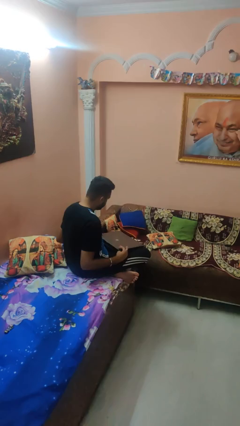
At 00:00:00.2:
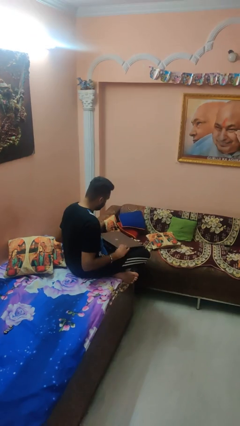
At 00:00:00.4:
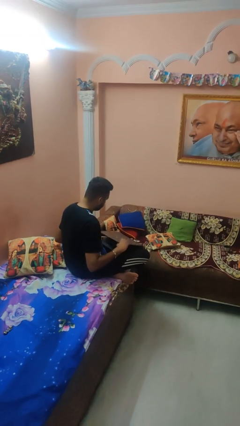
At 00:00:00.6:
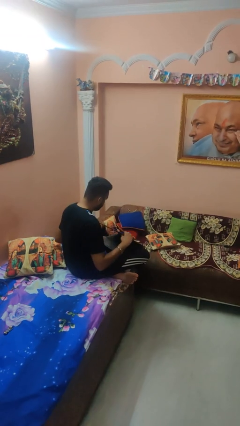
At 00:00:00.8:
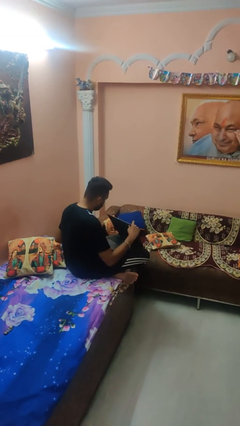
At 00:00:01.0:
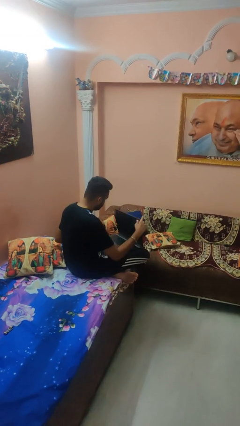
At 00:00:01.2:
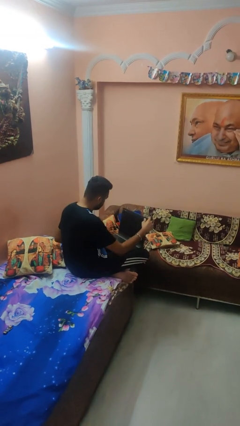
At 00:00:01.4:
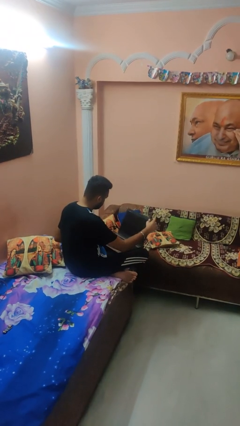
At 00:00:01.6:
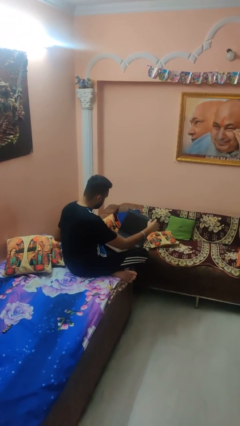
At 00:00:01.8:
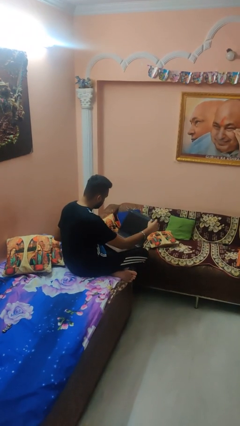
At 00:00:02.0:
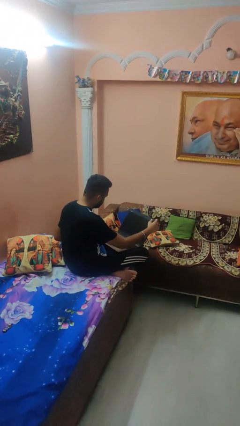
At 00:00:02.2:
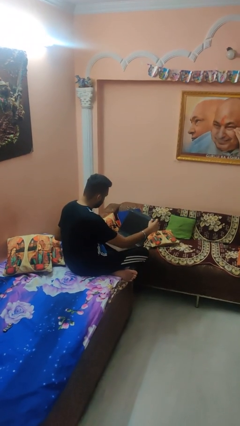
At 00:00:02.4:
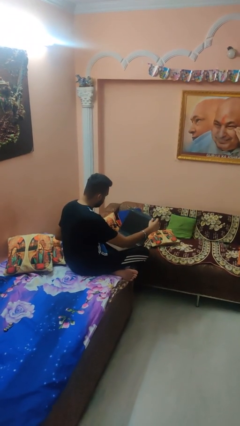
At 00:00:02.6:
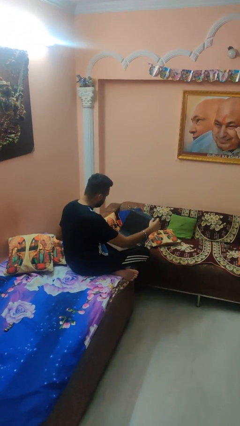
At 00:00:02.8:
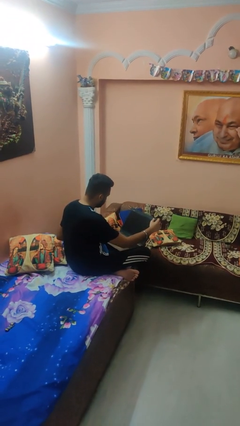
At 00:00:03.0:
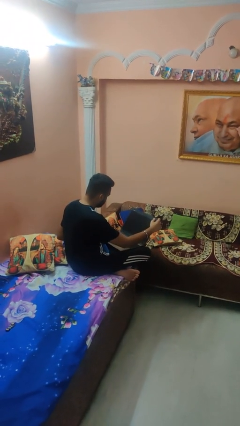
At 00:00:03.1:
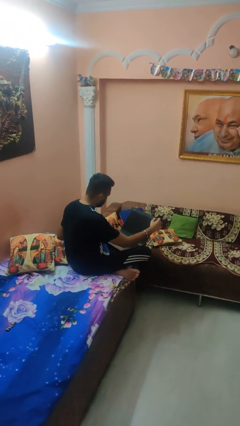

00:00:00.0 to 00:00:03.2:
person opens laptop

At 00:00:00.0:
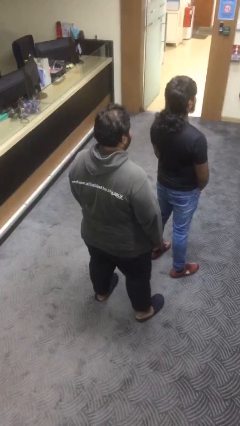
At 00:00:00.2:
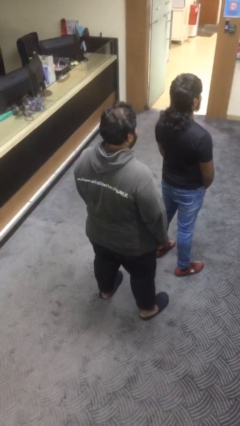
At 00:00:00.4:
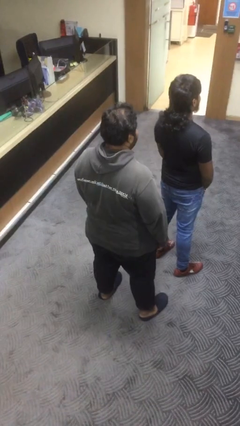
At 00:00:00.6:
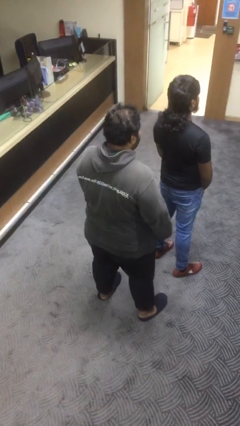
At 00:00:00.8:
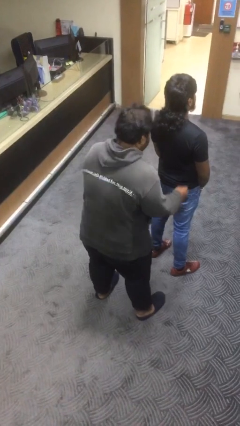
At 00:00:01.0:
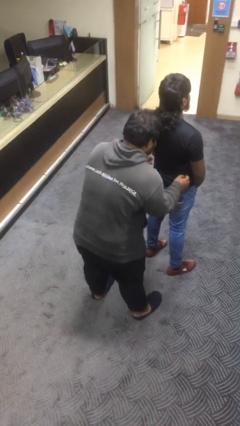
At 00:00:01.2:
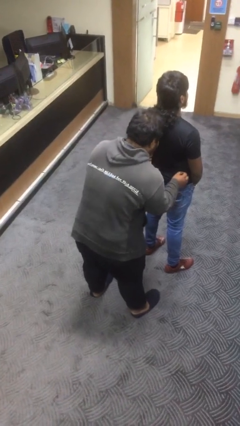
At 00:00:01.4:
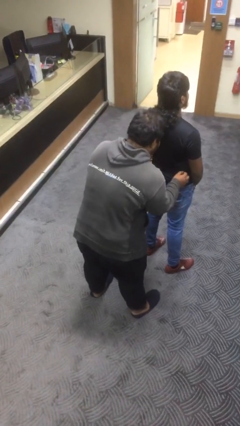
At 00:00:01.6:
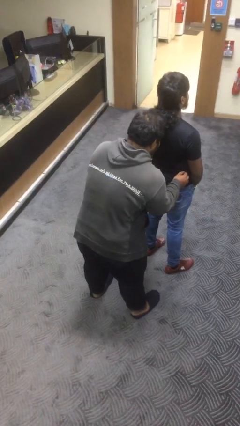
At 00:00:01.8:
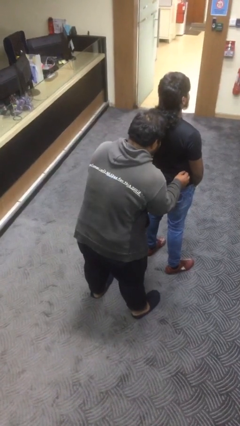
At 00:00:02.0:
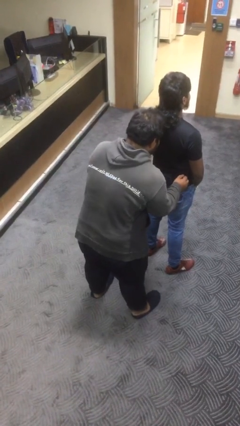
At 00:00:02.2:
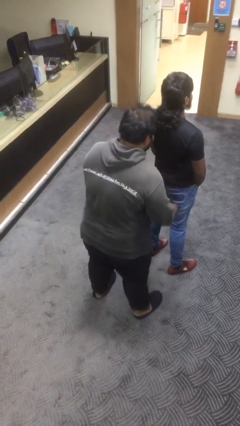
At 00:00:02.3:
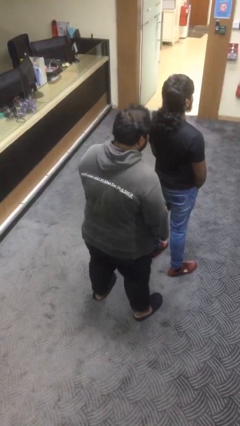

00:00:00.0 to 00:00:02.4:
person tickles person

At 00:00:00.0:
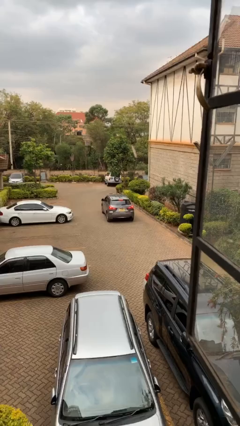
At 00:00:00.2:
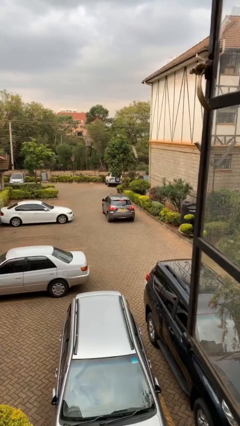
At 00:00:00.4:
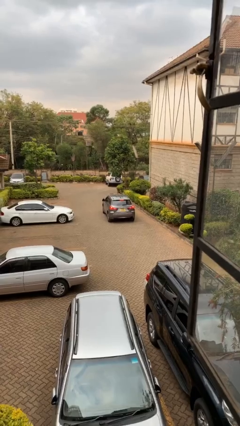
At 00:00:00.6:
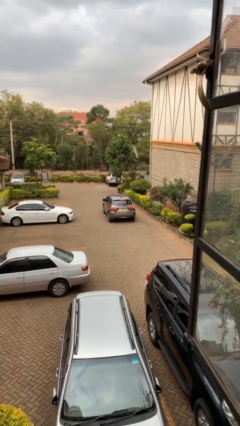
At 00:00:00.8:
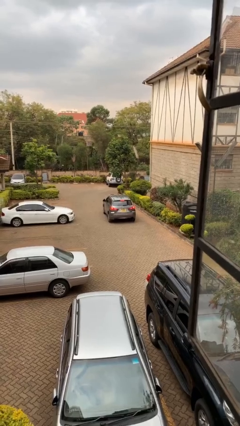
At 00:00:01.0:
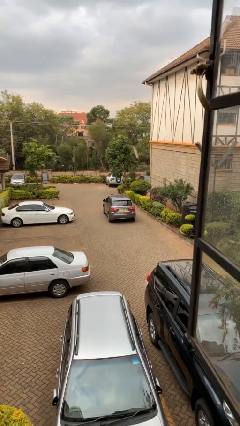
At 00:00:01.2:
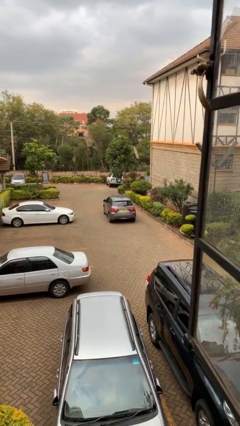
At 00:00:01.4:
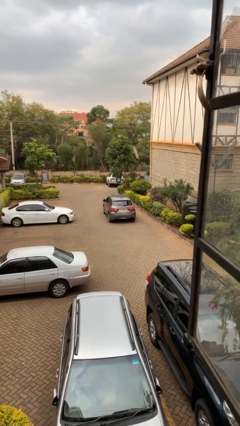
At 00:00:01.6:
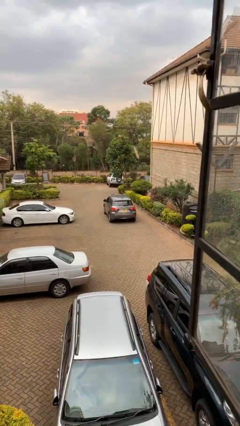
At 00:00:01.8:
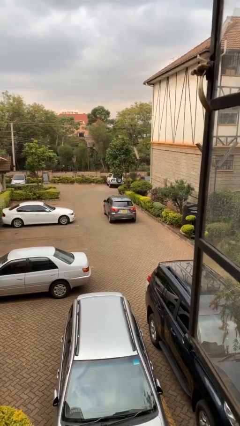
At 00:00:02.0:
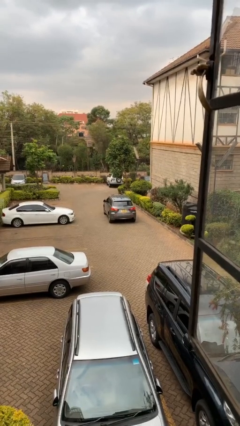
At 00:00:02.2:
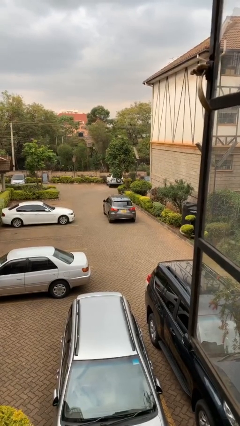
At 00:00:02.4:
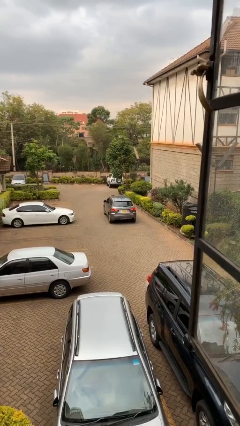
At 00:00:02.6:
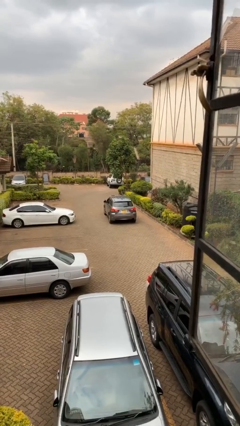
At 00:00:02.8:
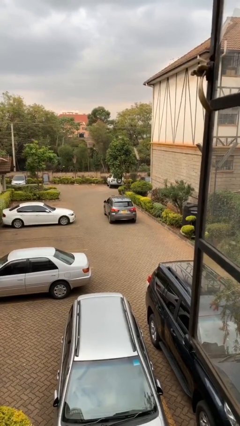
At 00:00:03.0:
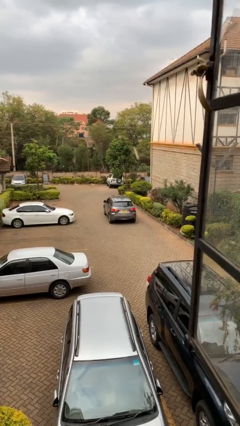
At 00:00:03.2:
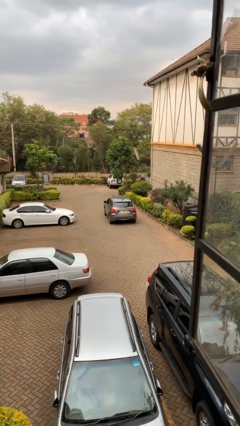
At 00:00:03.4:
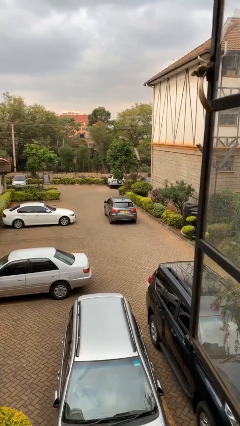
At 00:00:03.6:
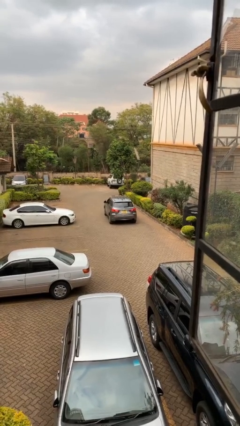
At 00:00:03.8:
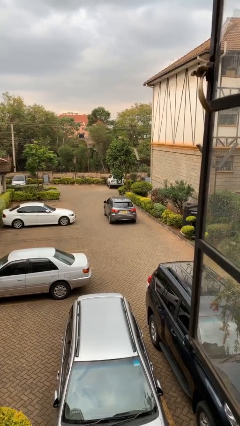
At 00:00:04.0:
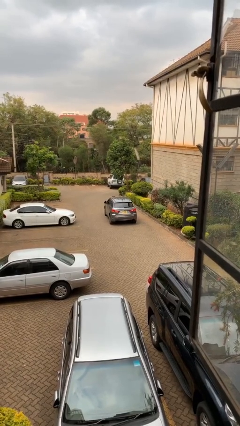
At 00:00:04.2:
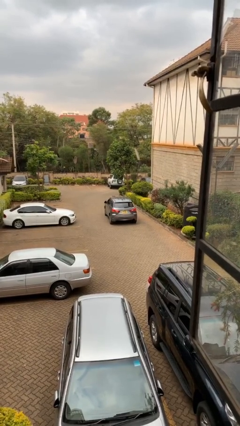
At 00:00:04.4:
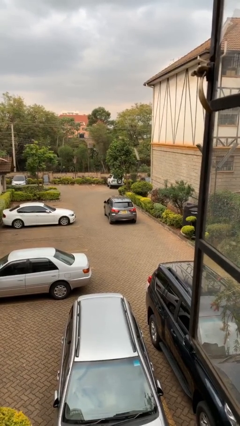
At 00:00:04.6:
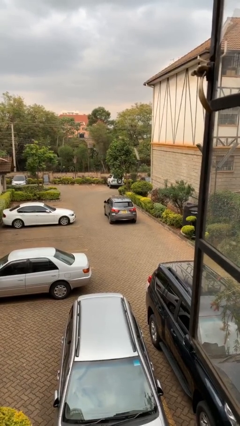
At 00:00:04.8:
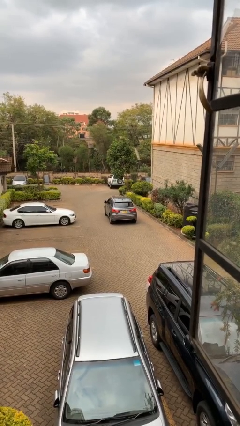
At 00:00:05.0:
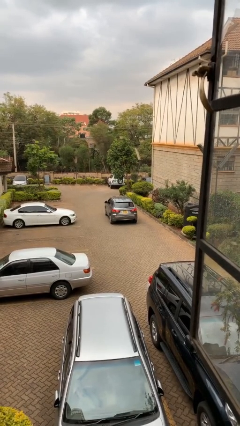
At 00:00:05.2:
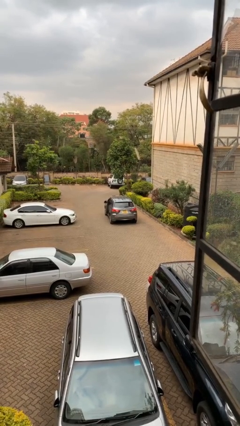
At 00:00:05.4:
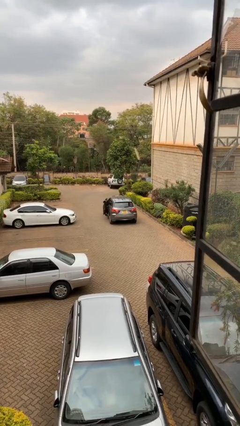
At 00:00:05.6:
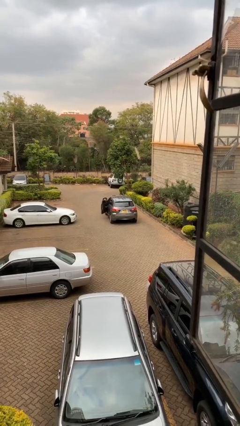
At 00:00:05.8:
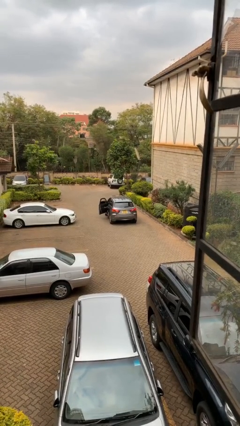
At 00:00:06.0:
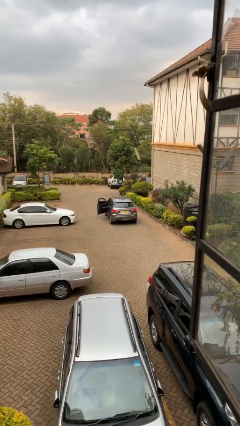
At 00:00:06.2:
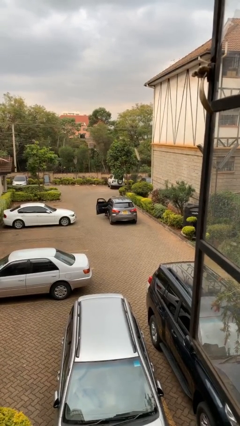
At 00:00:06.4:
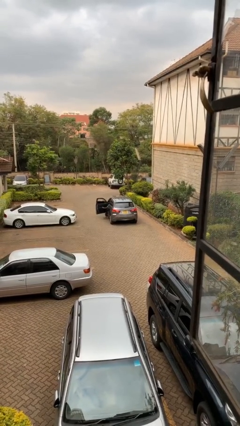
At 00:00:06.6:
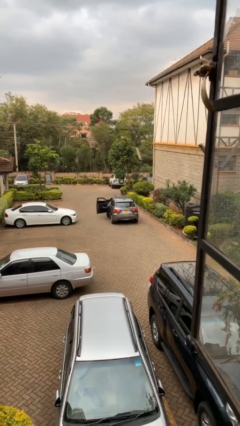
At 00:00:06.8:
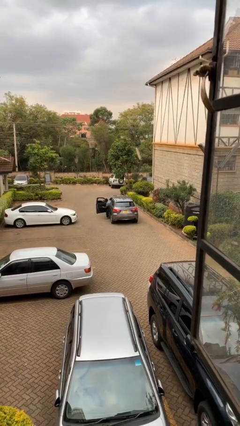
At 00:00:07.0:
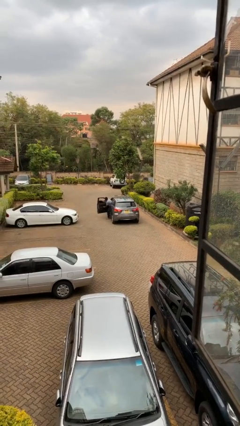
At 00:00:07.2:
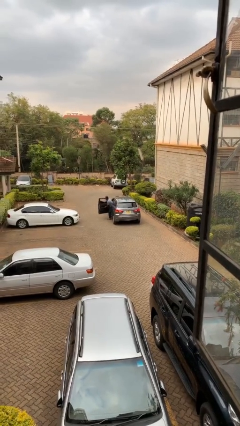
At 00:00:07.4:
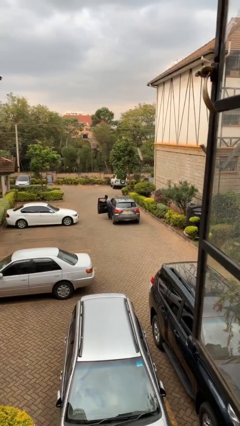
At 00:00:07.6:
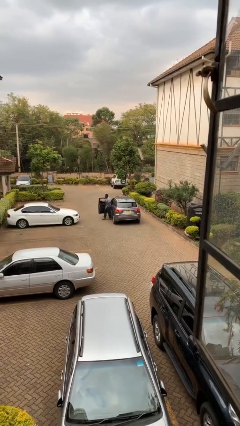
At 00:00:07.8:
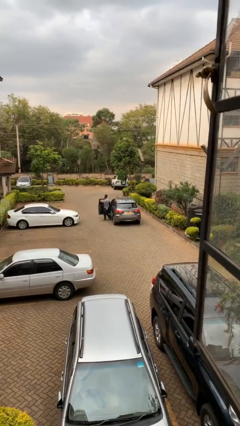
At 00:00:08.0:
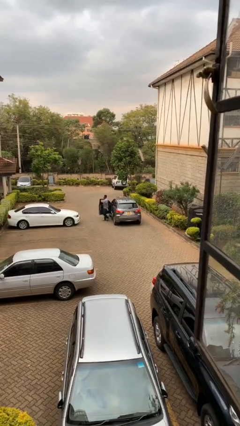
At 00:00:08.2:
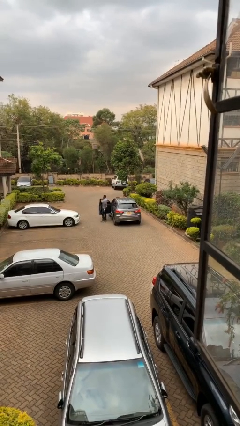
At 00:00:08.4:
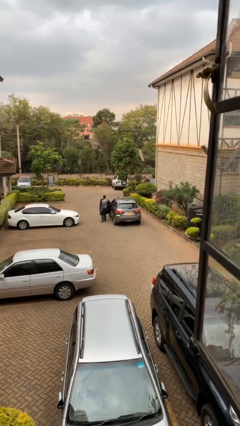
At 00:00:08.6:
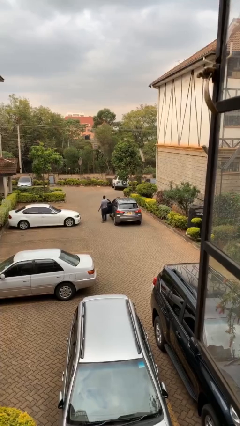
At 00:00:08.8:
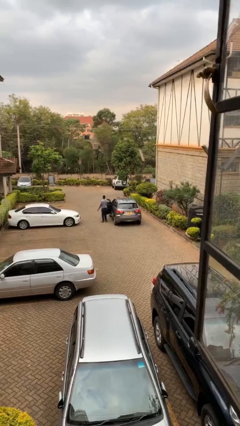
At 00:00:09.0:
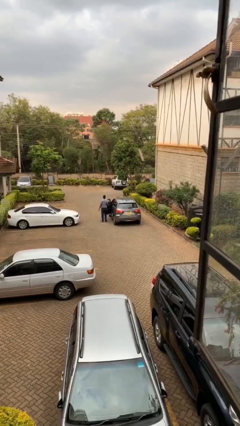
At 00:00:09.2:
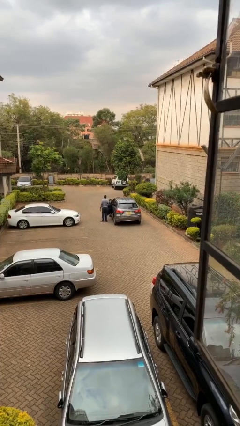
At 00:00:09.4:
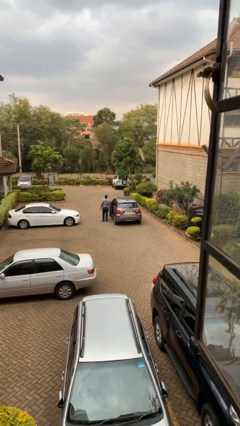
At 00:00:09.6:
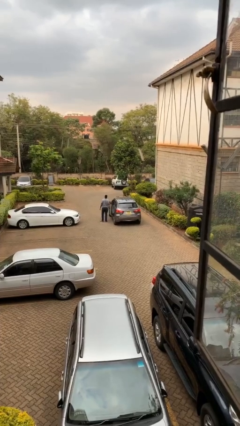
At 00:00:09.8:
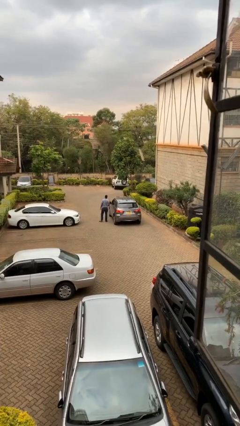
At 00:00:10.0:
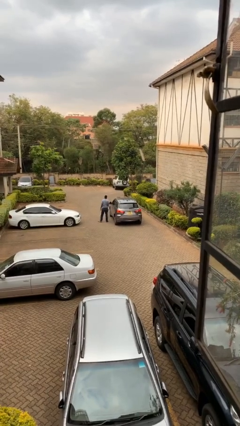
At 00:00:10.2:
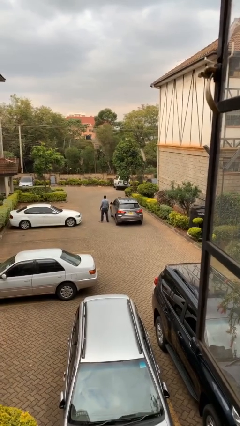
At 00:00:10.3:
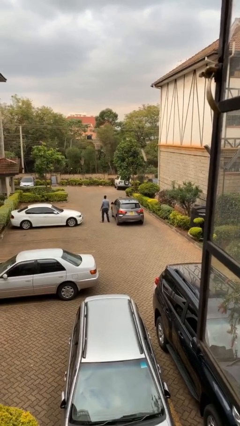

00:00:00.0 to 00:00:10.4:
car drops off person

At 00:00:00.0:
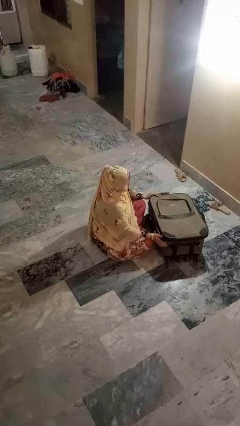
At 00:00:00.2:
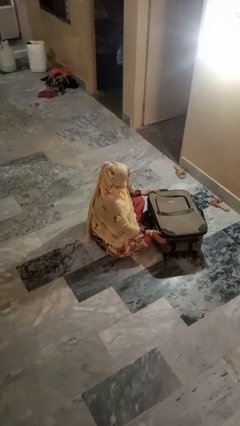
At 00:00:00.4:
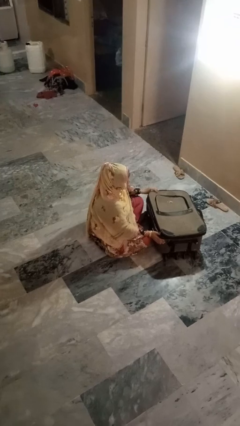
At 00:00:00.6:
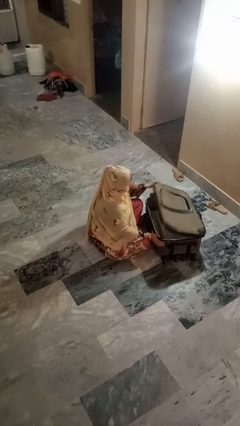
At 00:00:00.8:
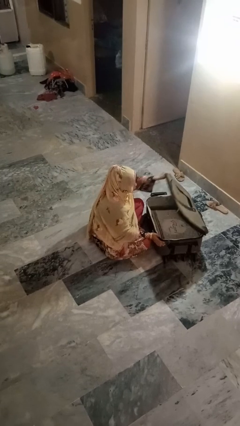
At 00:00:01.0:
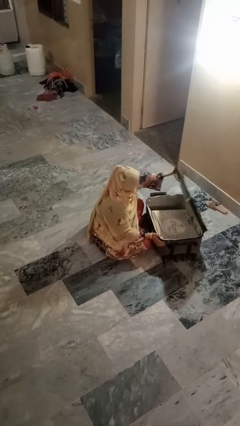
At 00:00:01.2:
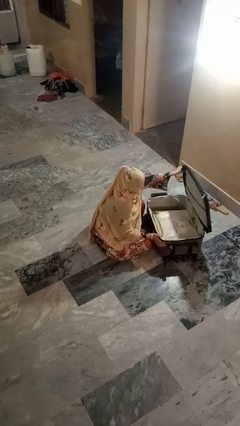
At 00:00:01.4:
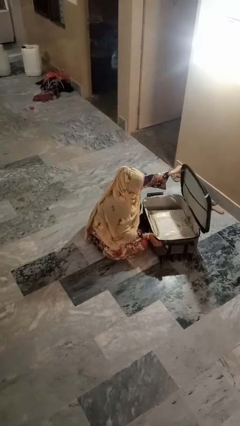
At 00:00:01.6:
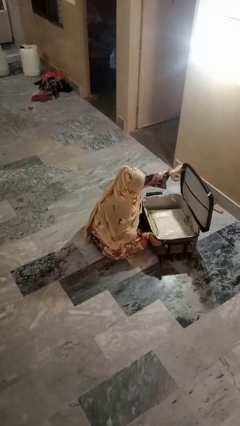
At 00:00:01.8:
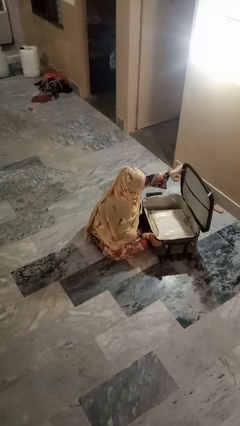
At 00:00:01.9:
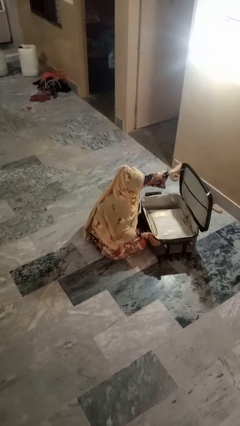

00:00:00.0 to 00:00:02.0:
person opens suitcase
